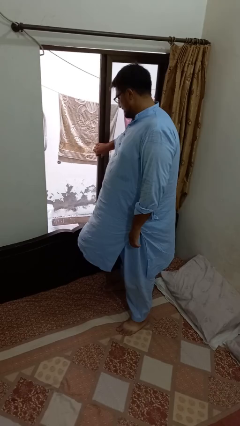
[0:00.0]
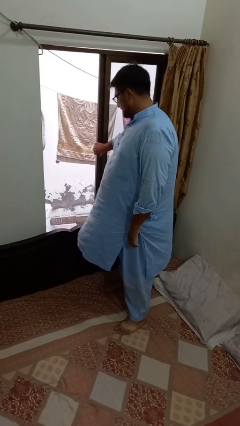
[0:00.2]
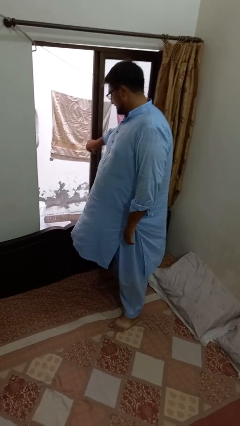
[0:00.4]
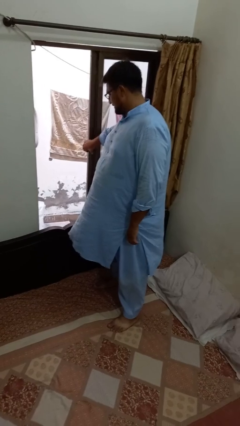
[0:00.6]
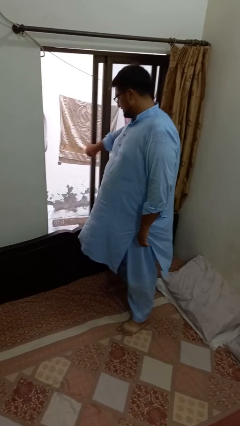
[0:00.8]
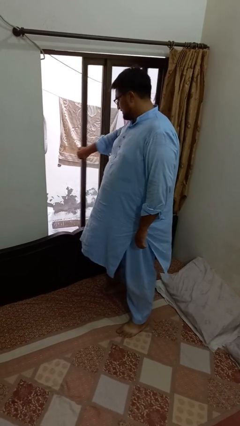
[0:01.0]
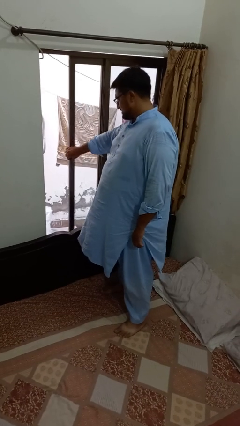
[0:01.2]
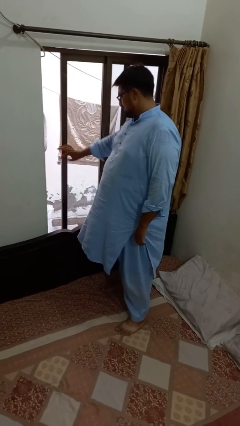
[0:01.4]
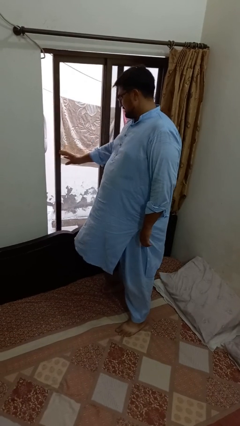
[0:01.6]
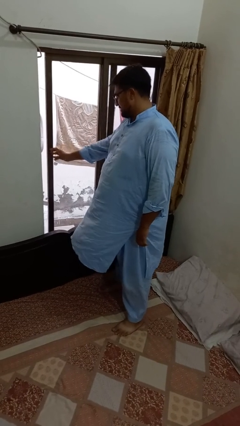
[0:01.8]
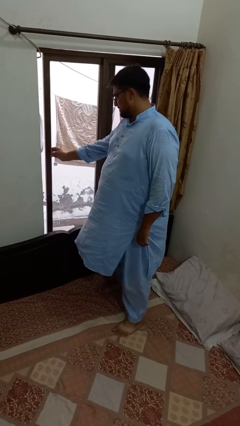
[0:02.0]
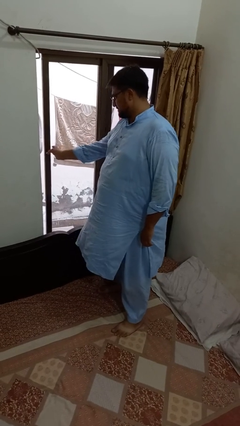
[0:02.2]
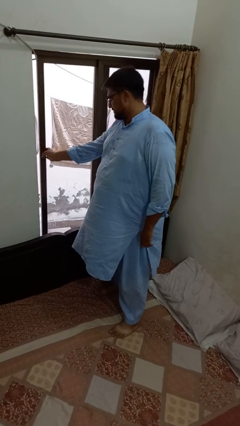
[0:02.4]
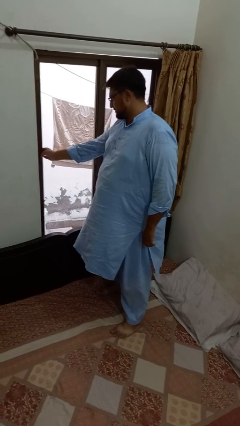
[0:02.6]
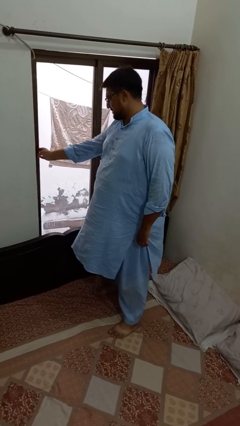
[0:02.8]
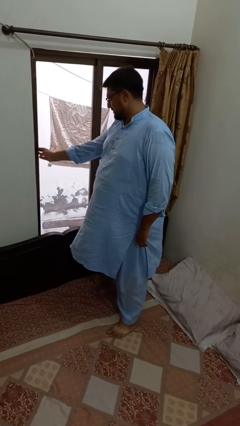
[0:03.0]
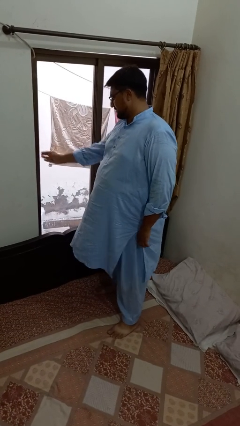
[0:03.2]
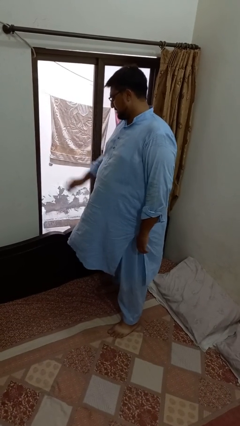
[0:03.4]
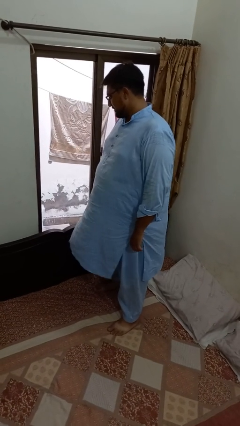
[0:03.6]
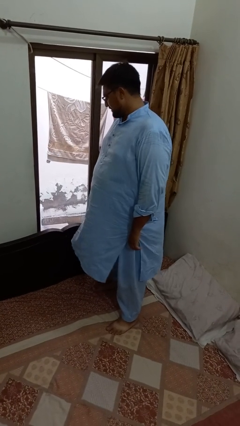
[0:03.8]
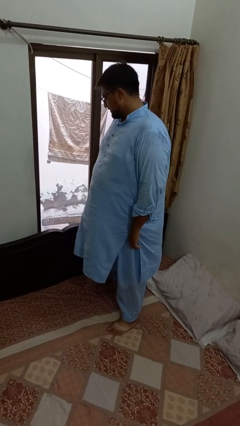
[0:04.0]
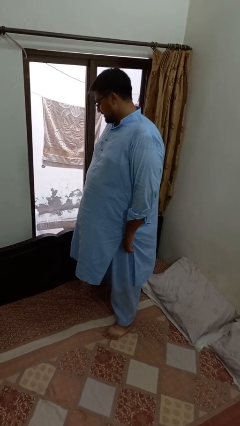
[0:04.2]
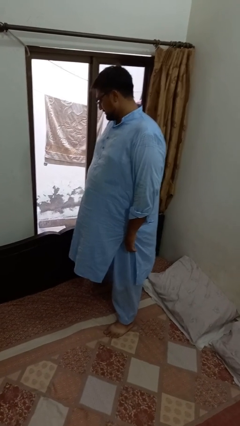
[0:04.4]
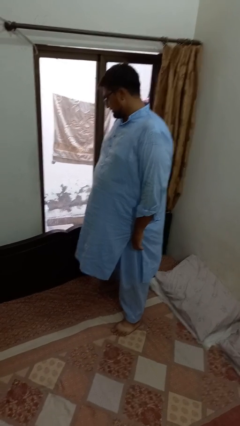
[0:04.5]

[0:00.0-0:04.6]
person closes home window

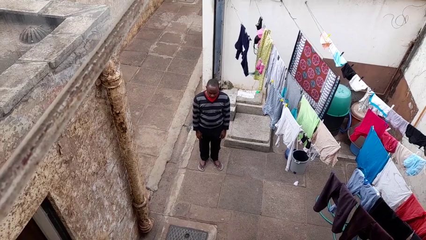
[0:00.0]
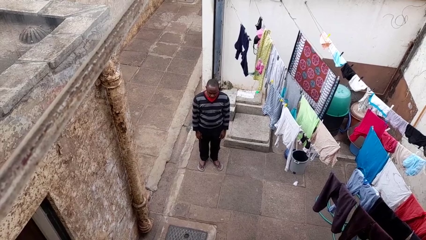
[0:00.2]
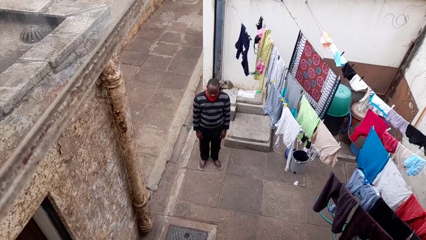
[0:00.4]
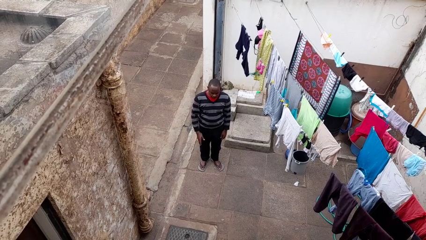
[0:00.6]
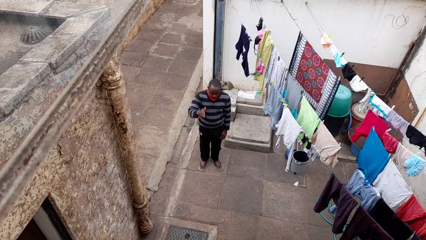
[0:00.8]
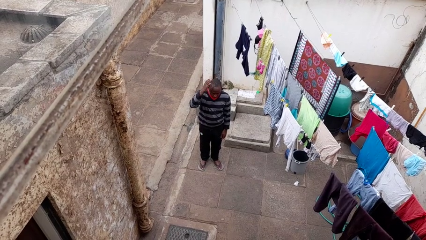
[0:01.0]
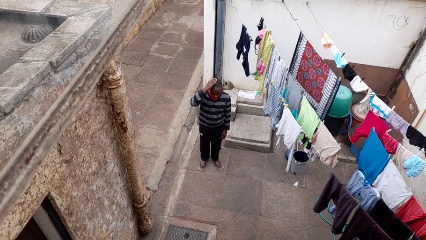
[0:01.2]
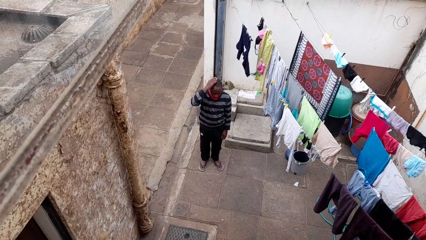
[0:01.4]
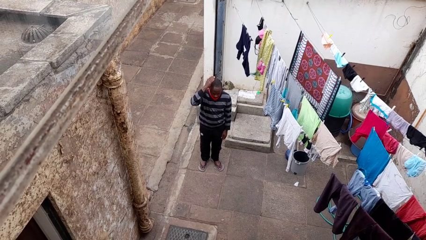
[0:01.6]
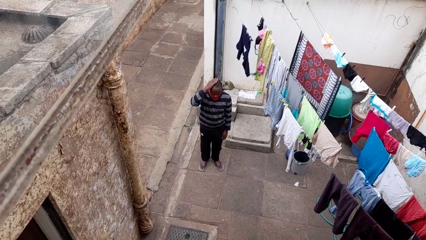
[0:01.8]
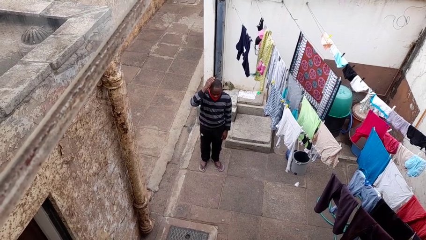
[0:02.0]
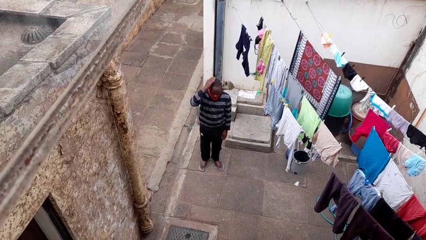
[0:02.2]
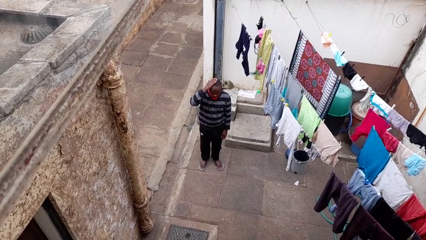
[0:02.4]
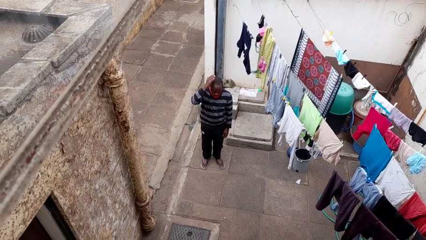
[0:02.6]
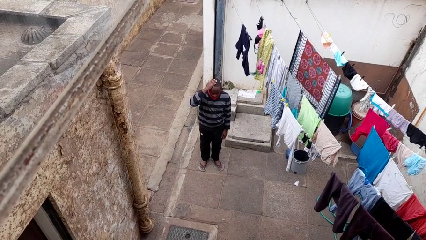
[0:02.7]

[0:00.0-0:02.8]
person pats head

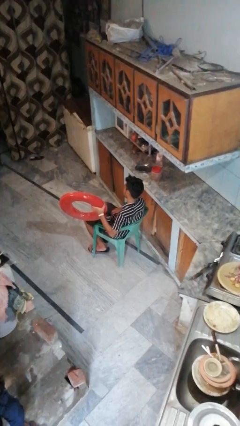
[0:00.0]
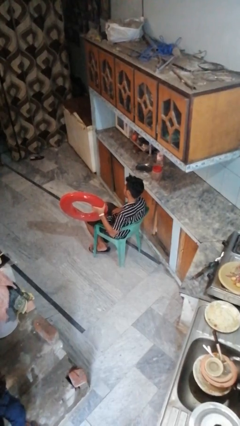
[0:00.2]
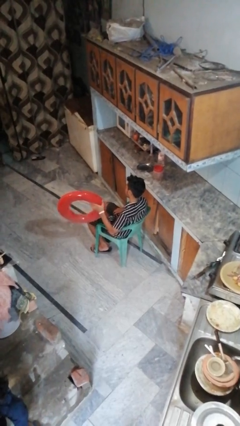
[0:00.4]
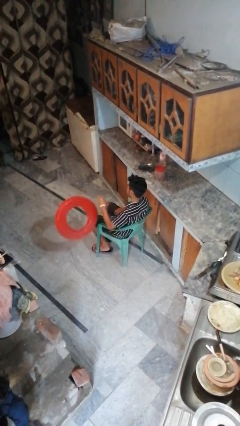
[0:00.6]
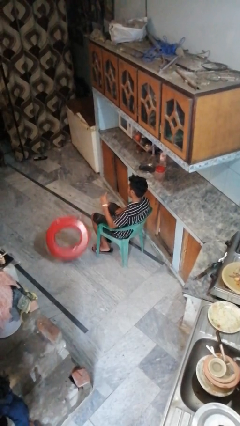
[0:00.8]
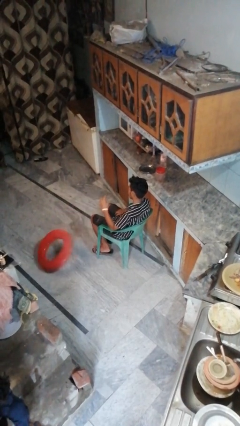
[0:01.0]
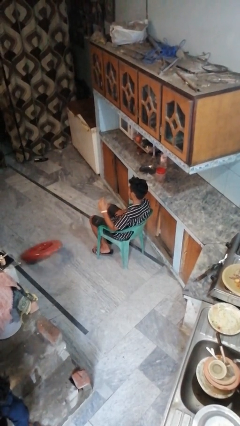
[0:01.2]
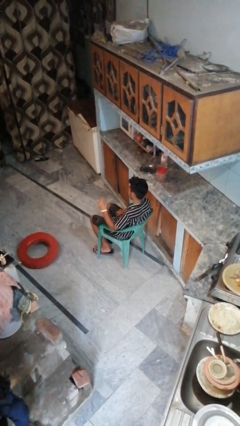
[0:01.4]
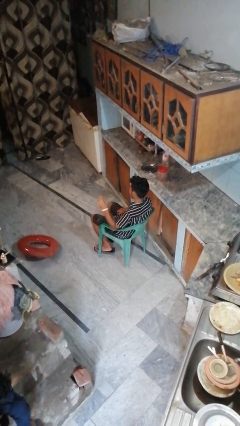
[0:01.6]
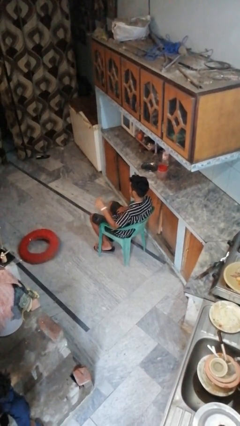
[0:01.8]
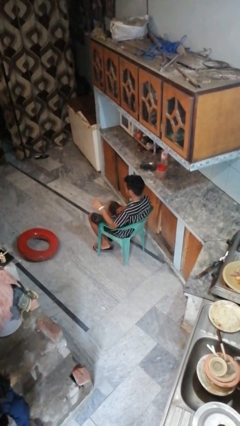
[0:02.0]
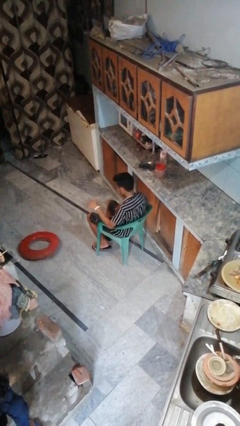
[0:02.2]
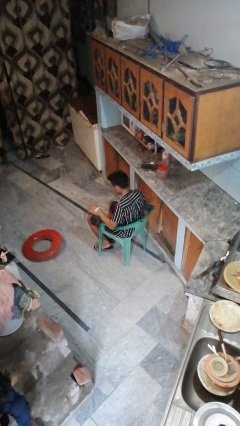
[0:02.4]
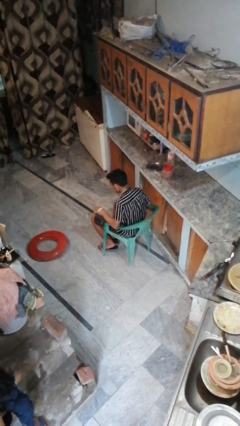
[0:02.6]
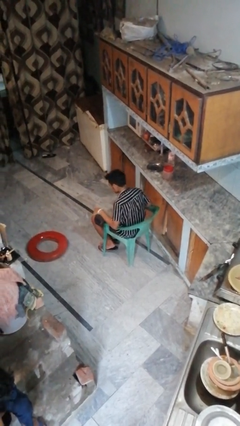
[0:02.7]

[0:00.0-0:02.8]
person throws object to ground

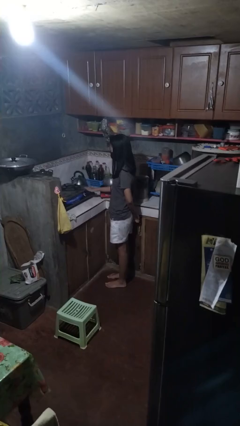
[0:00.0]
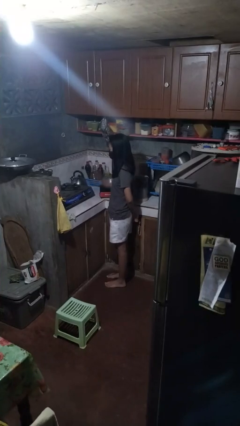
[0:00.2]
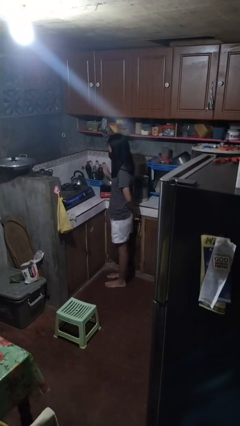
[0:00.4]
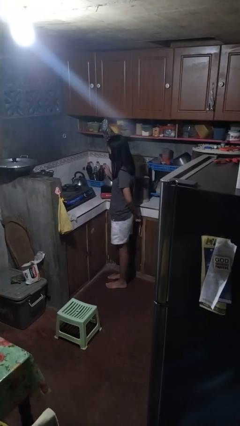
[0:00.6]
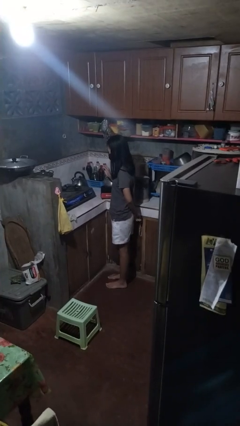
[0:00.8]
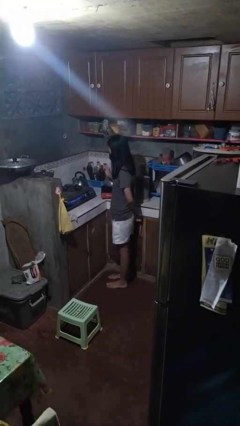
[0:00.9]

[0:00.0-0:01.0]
person burns hand

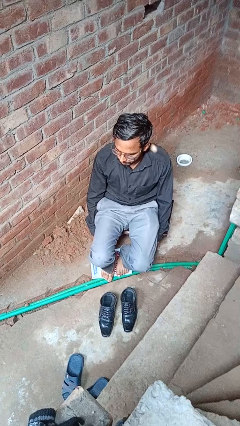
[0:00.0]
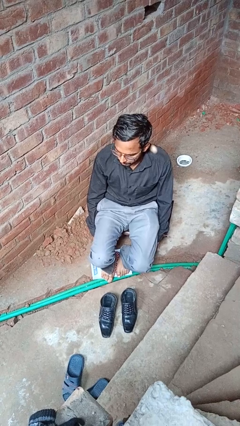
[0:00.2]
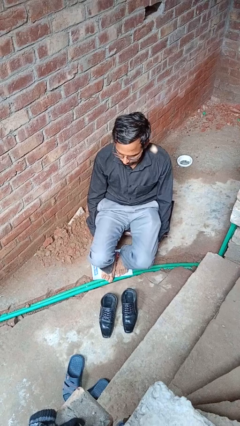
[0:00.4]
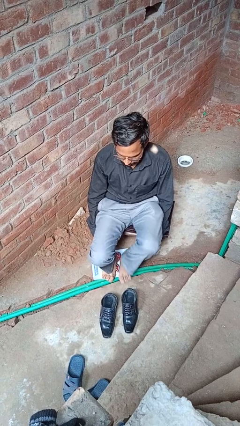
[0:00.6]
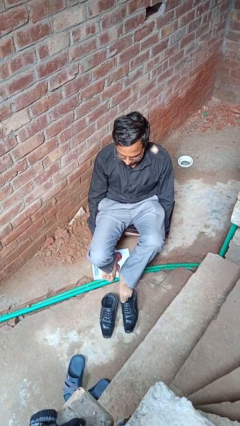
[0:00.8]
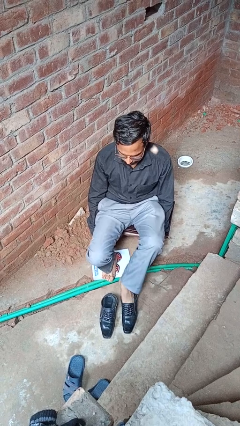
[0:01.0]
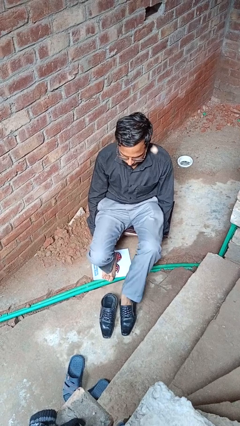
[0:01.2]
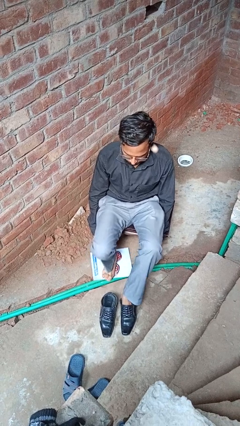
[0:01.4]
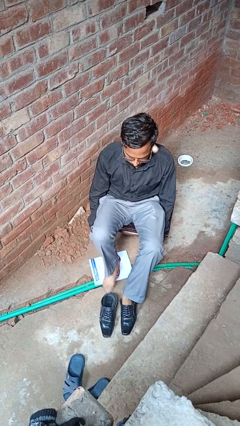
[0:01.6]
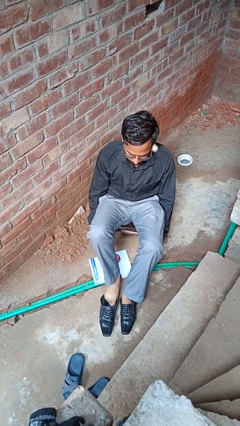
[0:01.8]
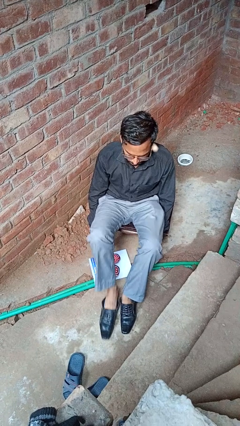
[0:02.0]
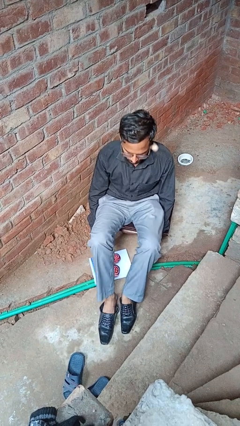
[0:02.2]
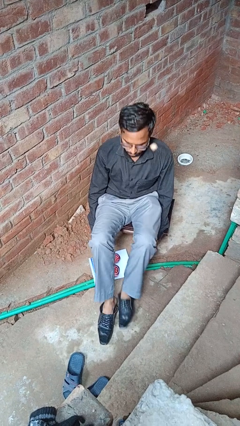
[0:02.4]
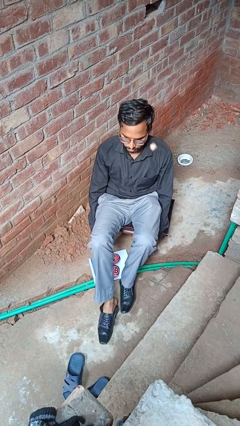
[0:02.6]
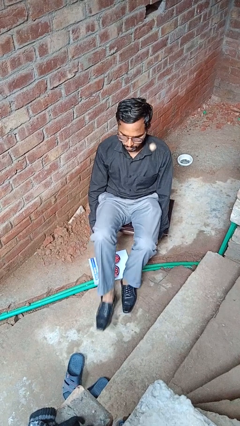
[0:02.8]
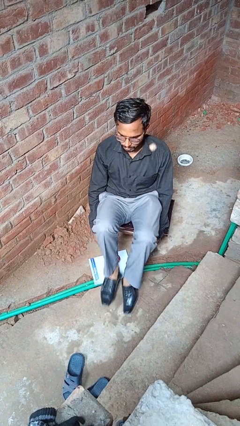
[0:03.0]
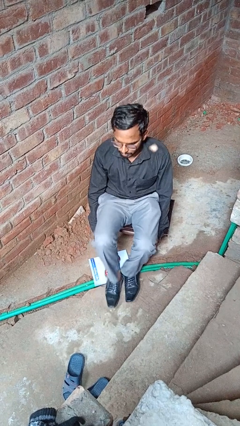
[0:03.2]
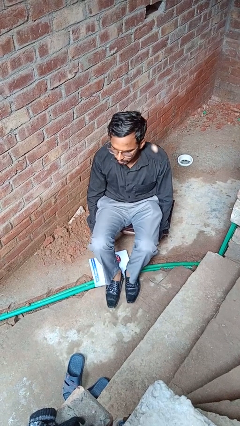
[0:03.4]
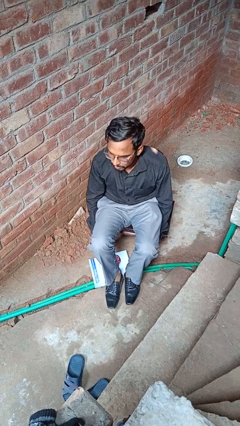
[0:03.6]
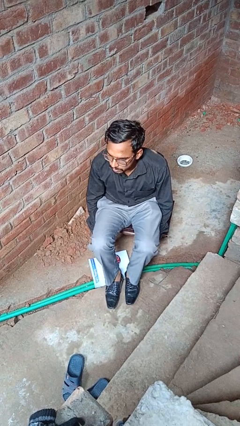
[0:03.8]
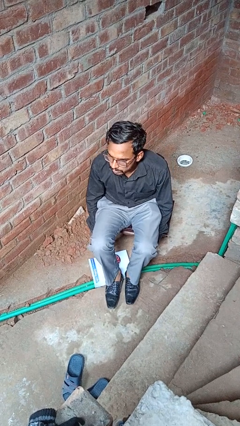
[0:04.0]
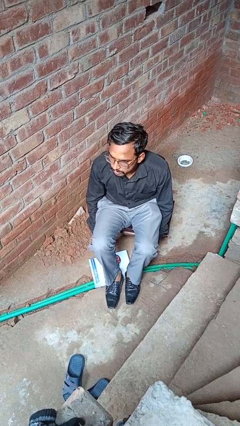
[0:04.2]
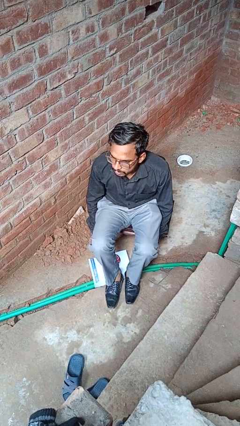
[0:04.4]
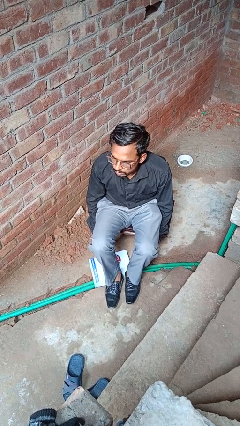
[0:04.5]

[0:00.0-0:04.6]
person puts on shoes

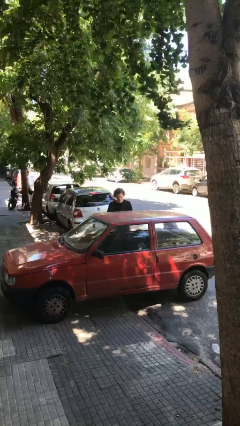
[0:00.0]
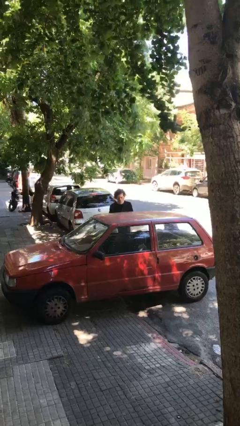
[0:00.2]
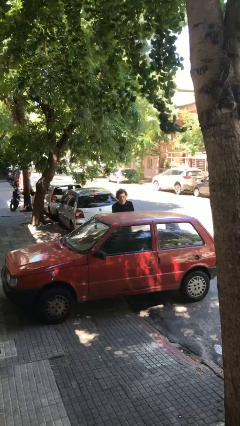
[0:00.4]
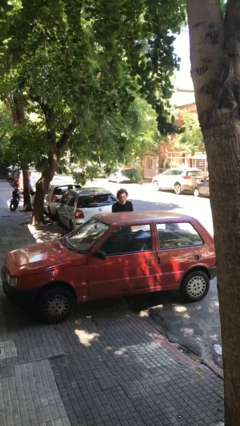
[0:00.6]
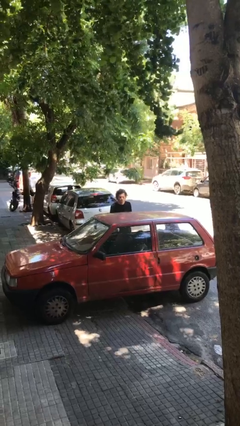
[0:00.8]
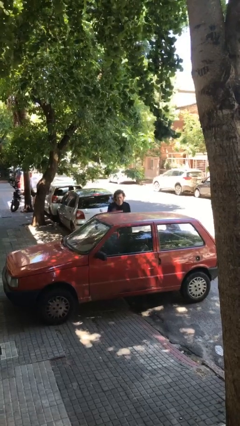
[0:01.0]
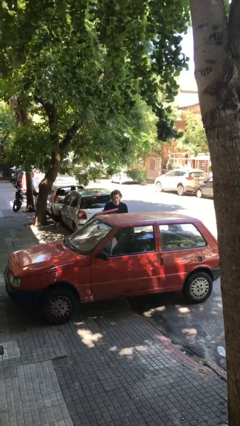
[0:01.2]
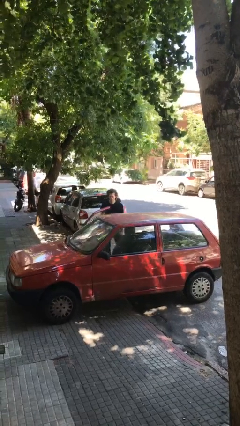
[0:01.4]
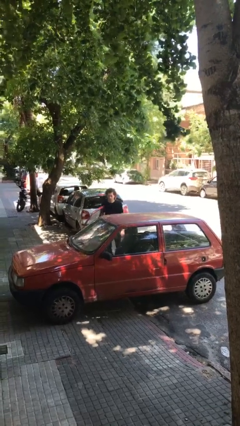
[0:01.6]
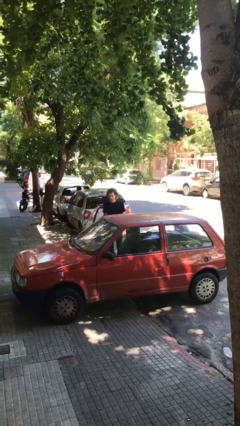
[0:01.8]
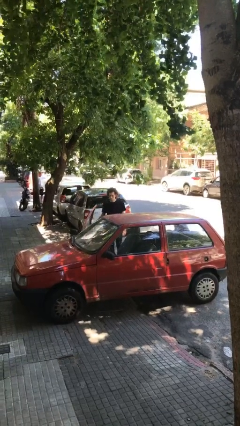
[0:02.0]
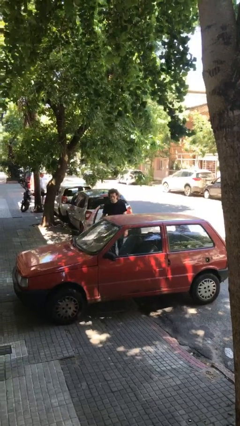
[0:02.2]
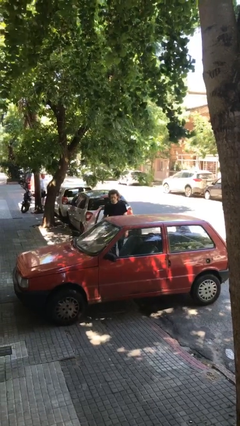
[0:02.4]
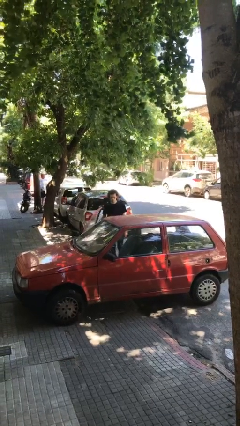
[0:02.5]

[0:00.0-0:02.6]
person opens car door
